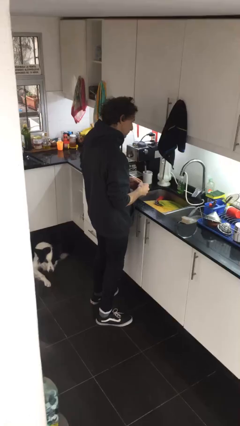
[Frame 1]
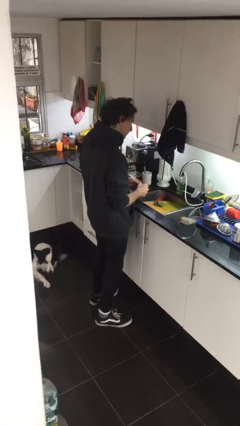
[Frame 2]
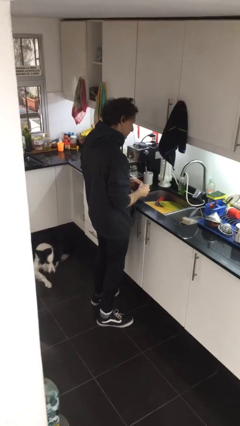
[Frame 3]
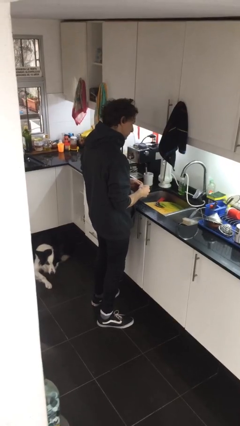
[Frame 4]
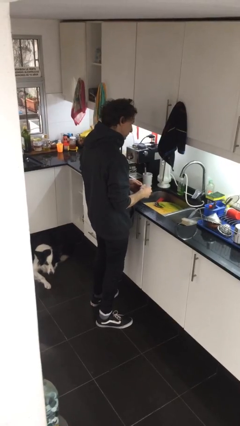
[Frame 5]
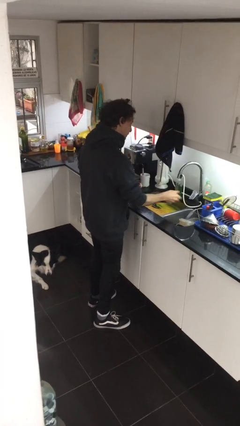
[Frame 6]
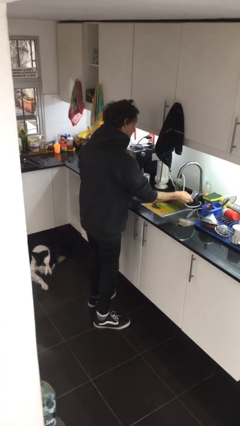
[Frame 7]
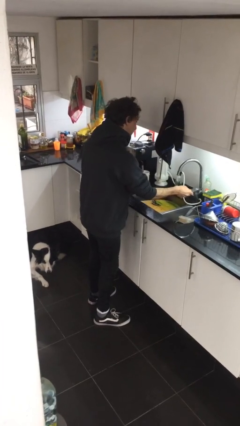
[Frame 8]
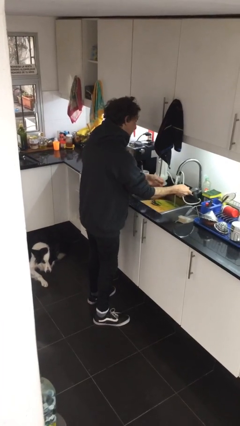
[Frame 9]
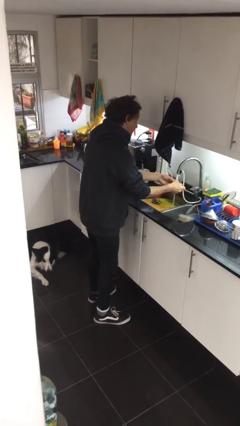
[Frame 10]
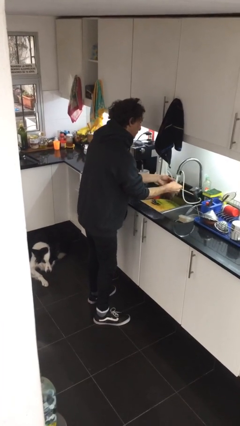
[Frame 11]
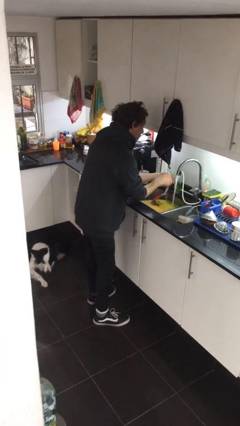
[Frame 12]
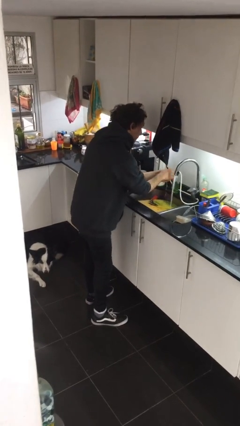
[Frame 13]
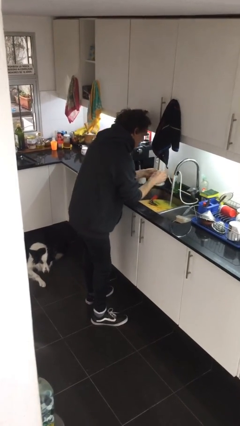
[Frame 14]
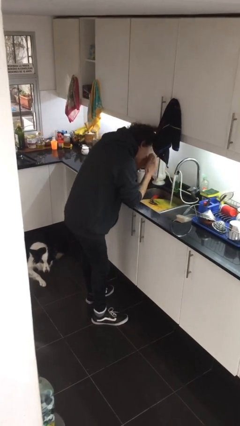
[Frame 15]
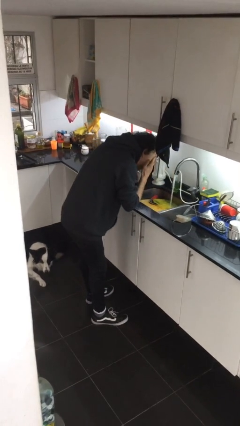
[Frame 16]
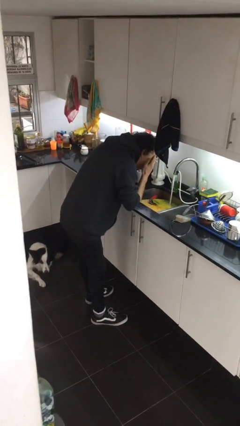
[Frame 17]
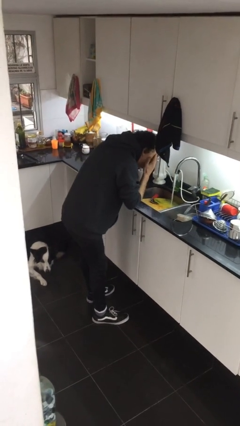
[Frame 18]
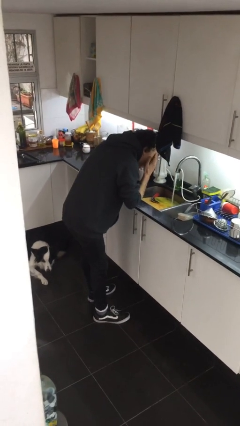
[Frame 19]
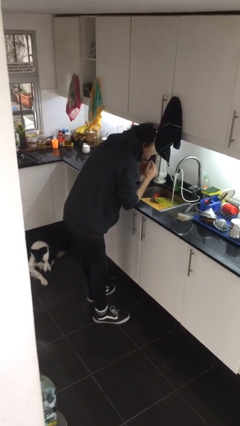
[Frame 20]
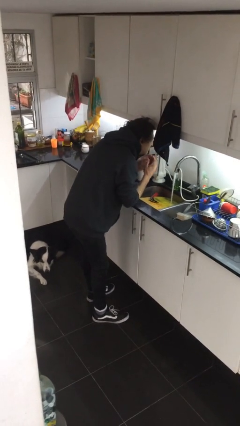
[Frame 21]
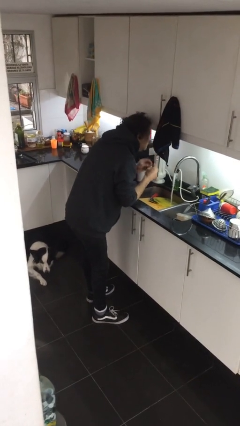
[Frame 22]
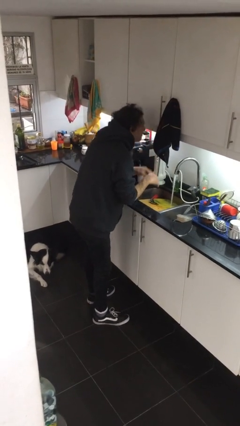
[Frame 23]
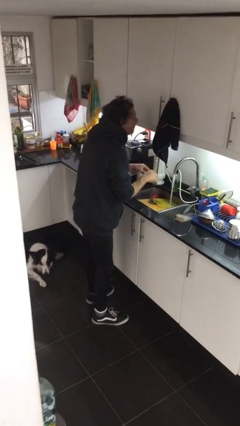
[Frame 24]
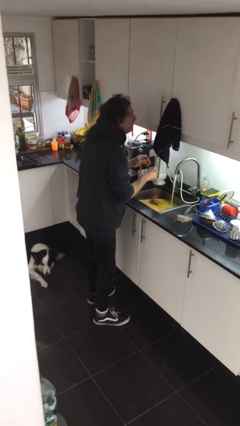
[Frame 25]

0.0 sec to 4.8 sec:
person washes face

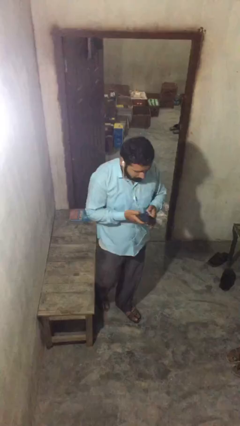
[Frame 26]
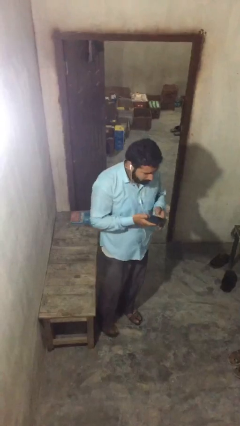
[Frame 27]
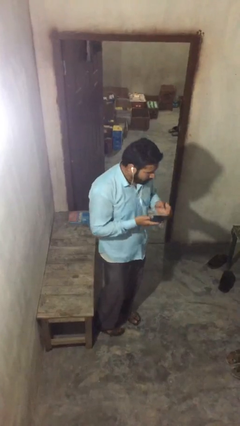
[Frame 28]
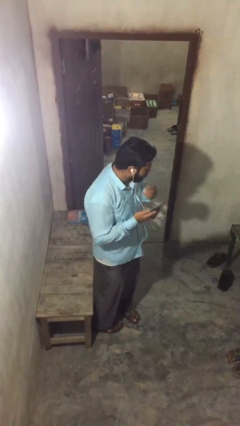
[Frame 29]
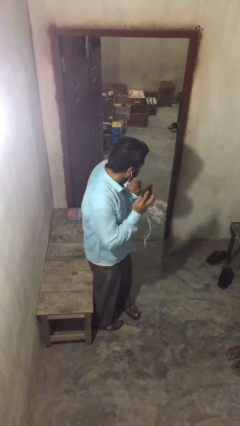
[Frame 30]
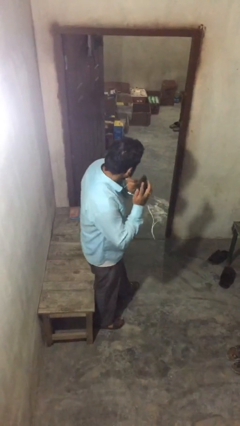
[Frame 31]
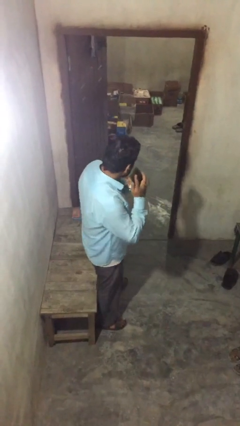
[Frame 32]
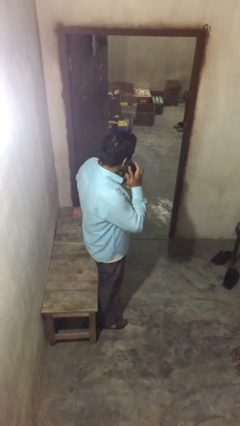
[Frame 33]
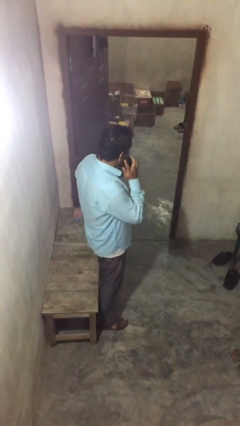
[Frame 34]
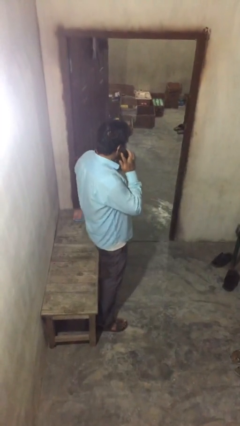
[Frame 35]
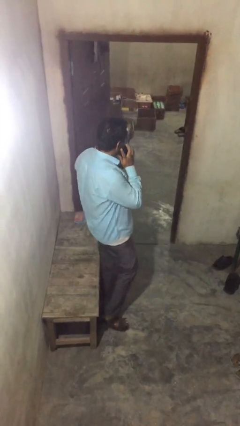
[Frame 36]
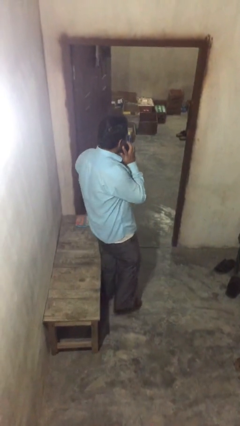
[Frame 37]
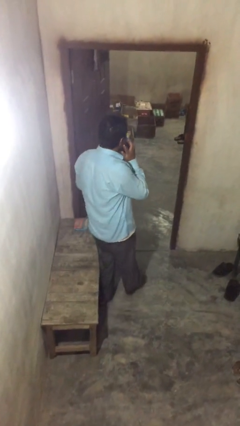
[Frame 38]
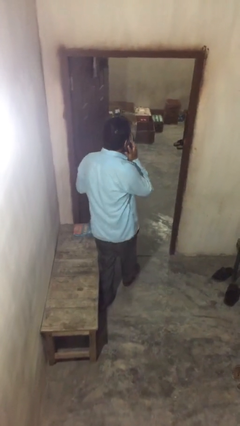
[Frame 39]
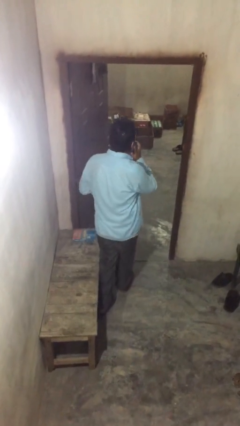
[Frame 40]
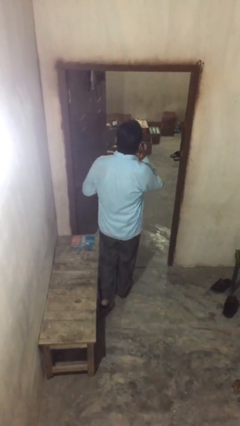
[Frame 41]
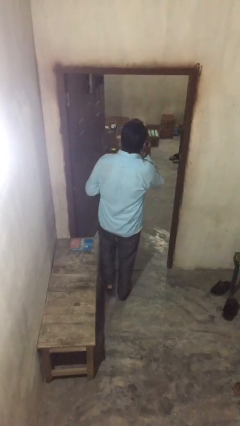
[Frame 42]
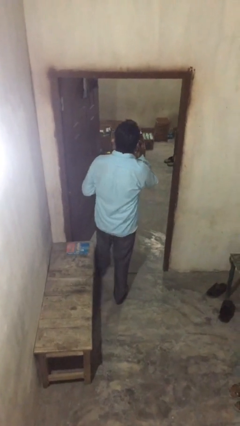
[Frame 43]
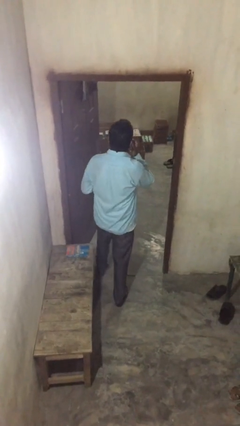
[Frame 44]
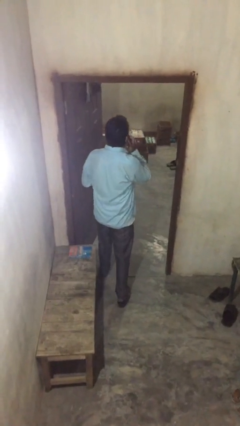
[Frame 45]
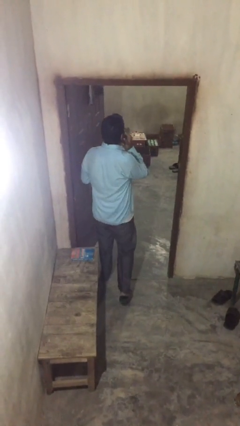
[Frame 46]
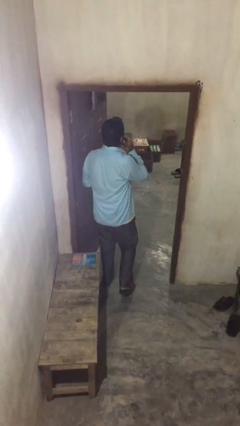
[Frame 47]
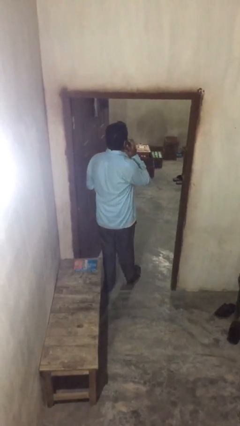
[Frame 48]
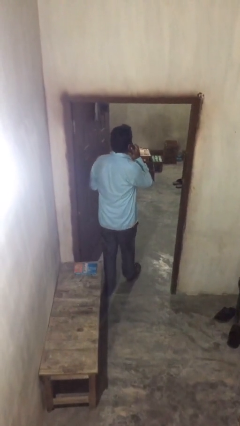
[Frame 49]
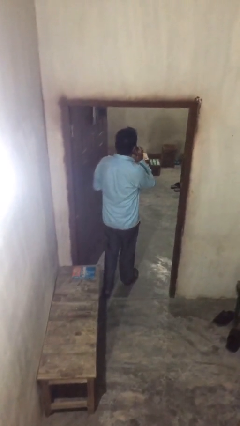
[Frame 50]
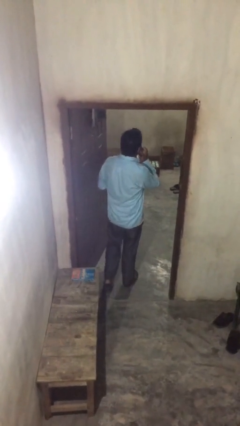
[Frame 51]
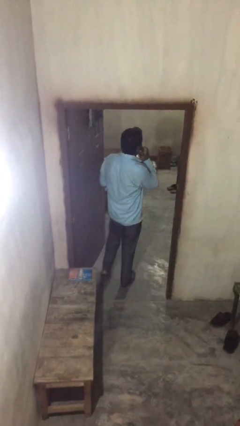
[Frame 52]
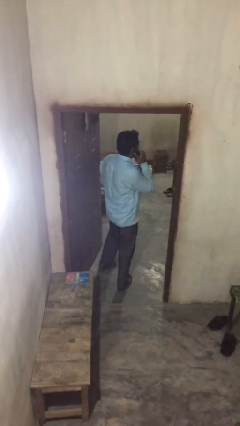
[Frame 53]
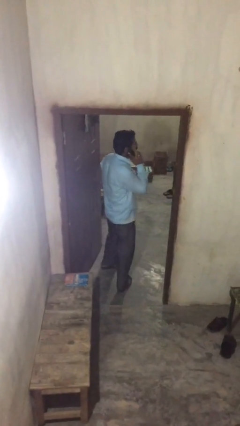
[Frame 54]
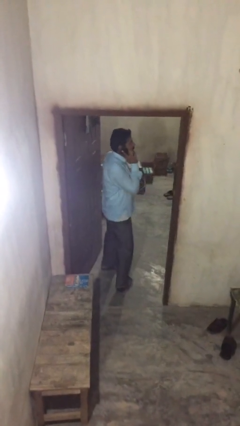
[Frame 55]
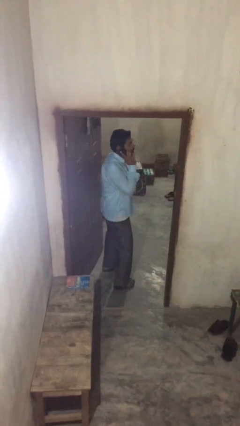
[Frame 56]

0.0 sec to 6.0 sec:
person talks on phone

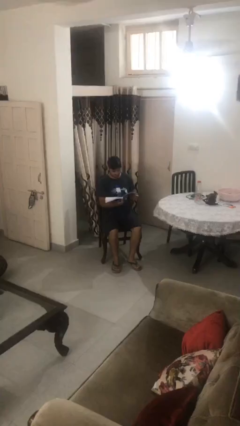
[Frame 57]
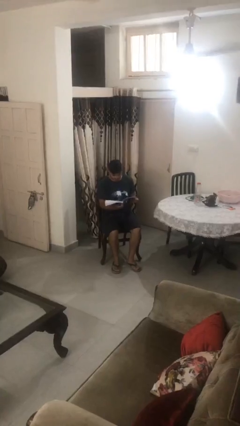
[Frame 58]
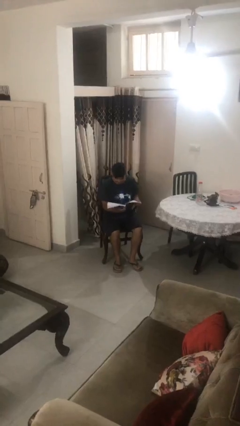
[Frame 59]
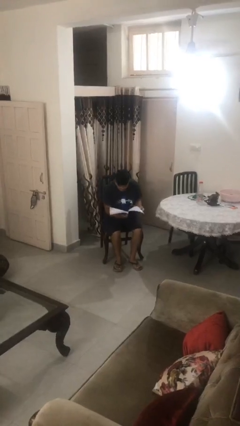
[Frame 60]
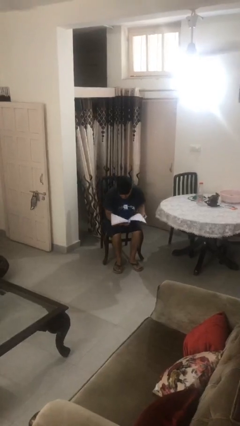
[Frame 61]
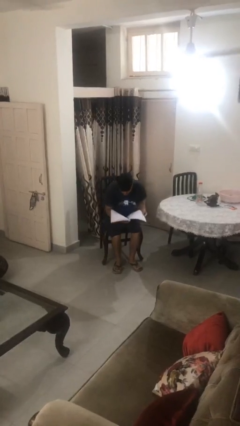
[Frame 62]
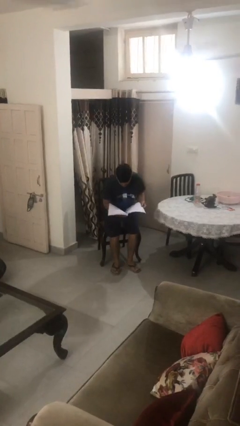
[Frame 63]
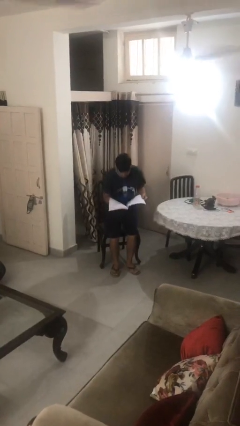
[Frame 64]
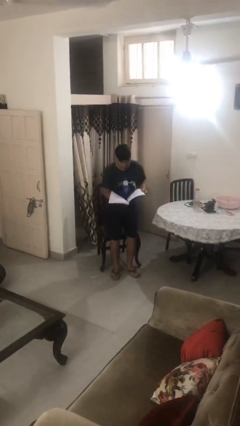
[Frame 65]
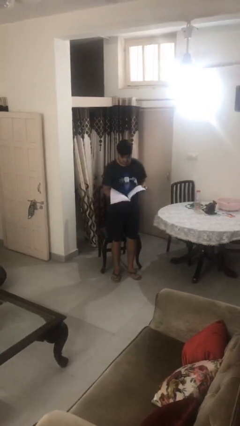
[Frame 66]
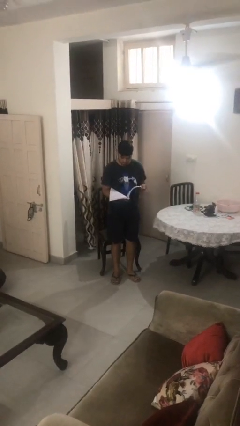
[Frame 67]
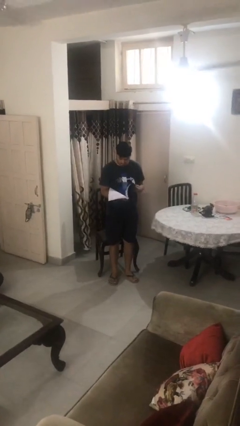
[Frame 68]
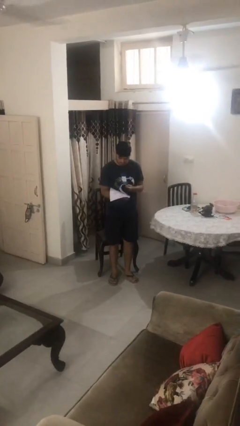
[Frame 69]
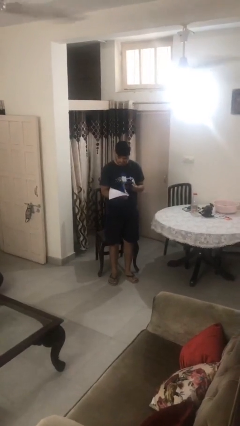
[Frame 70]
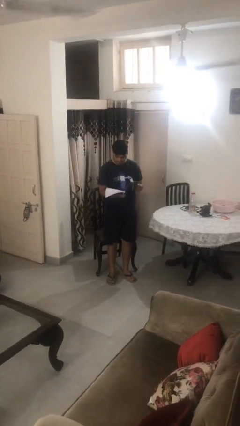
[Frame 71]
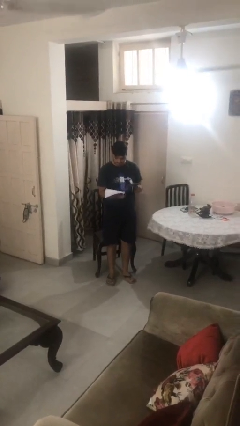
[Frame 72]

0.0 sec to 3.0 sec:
person stands up

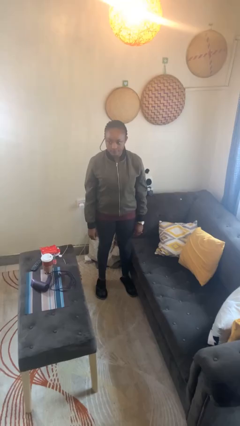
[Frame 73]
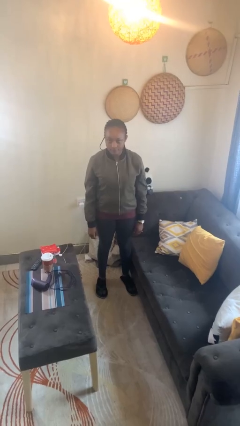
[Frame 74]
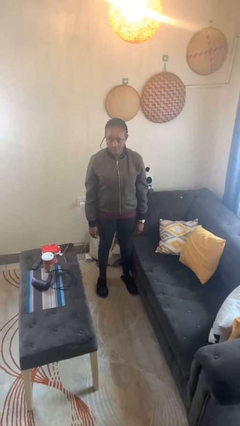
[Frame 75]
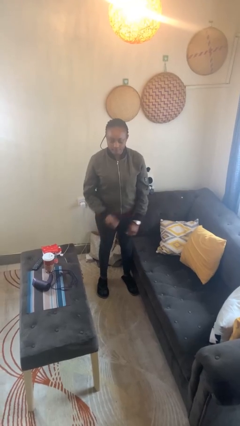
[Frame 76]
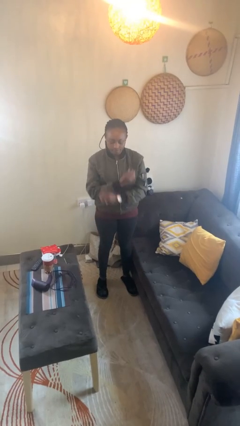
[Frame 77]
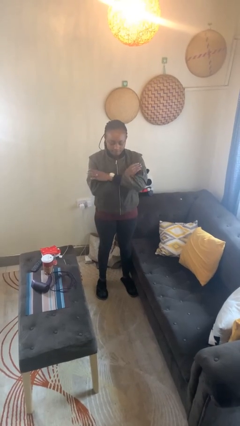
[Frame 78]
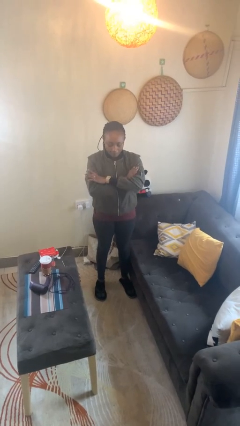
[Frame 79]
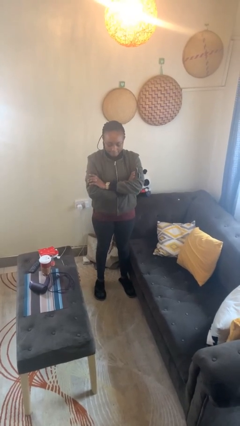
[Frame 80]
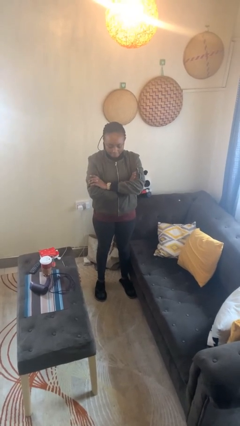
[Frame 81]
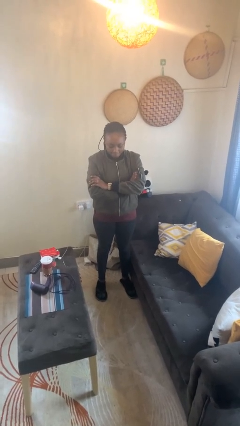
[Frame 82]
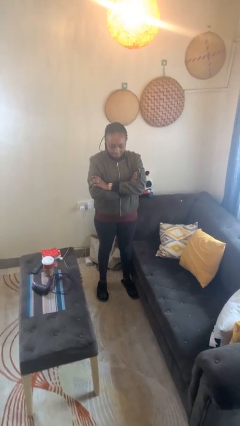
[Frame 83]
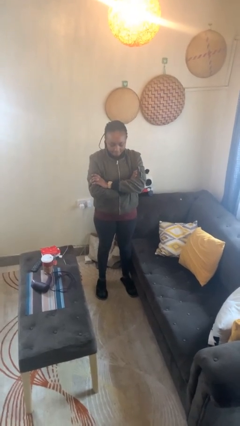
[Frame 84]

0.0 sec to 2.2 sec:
person gestures arms x

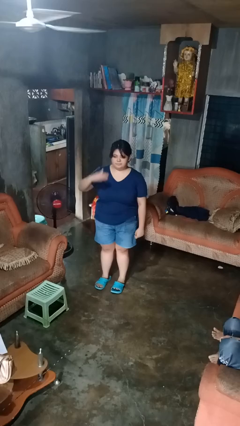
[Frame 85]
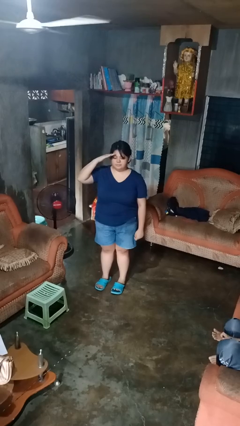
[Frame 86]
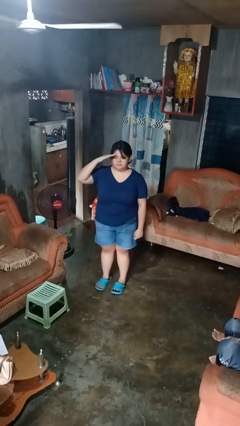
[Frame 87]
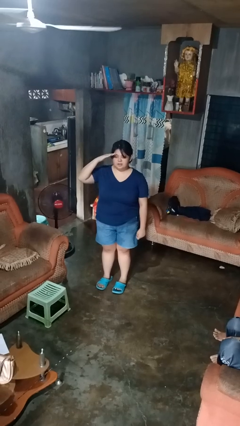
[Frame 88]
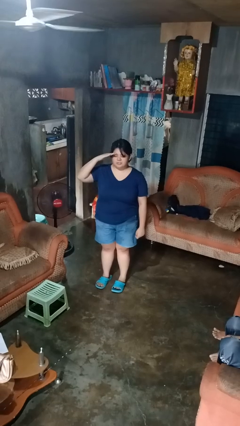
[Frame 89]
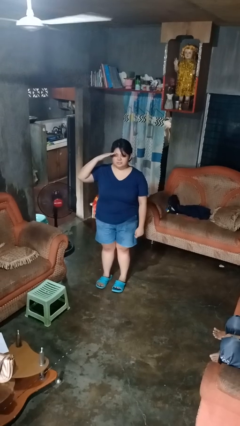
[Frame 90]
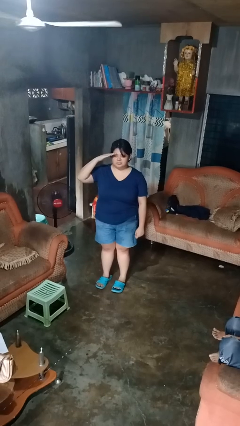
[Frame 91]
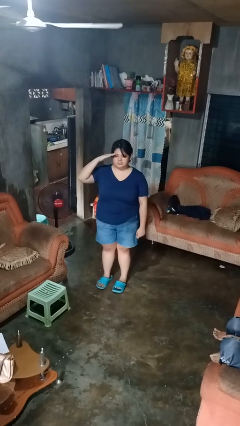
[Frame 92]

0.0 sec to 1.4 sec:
person salutes

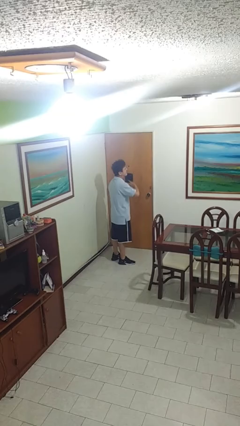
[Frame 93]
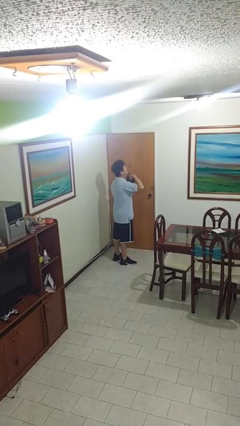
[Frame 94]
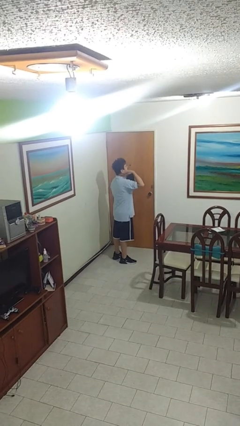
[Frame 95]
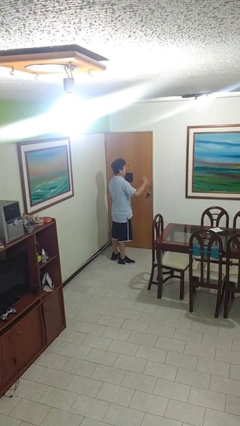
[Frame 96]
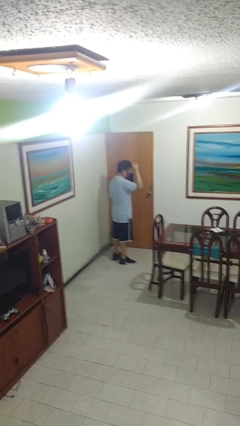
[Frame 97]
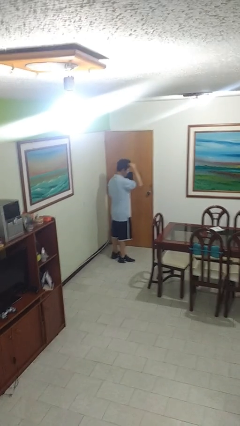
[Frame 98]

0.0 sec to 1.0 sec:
person gestures cut
